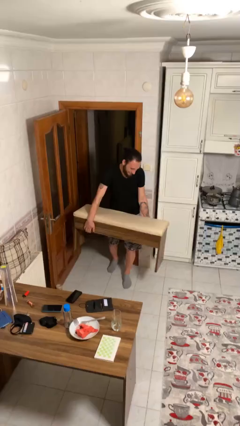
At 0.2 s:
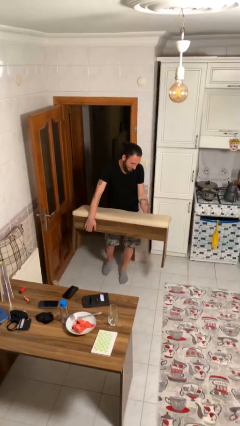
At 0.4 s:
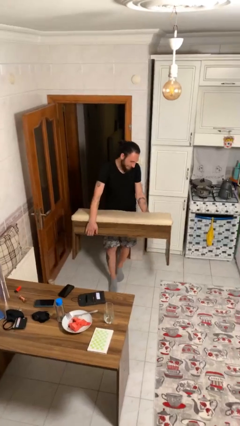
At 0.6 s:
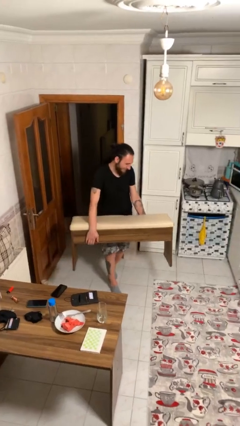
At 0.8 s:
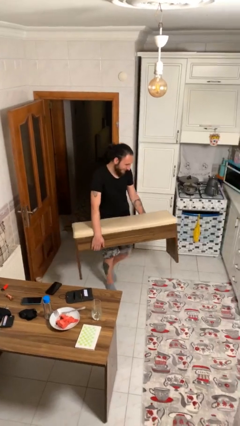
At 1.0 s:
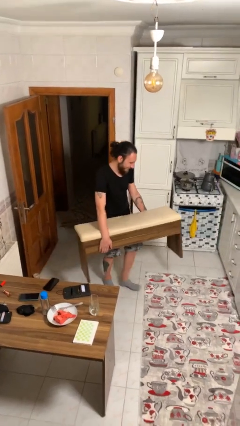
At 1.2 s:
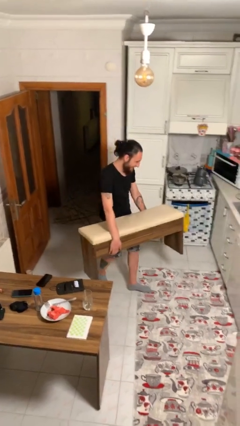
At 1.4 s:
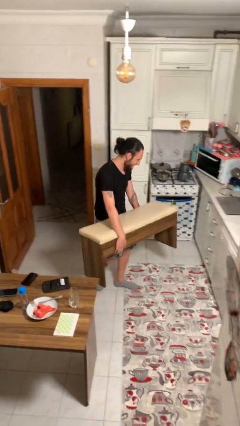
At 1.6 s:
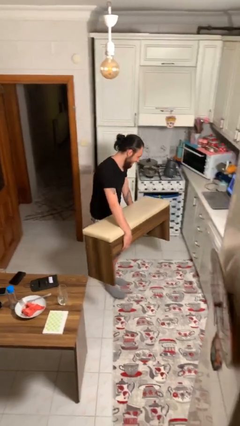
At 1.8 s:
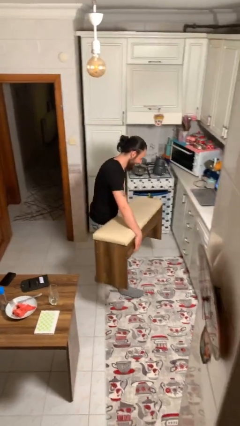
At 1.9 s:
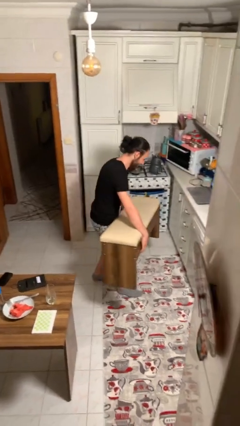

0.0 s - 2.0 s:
person carries heavy object

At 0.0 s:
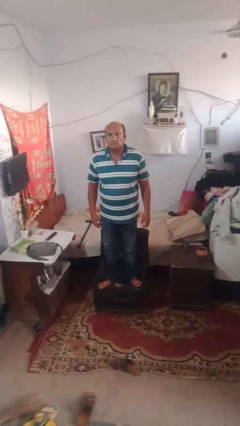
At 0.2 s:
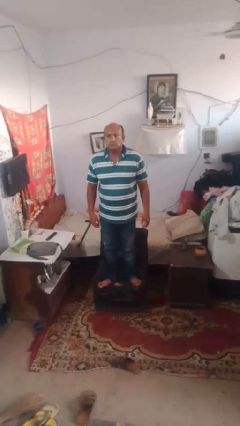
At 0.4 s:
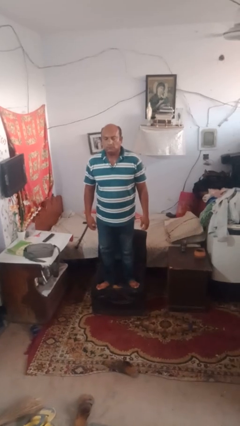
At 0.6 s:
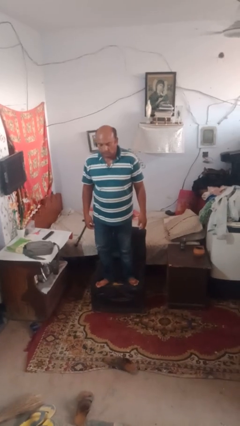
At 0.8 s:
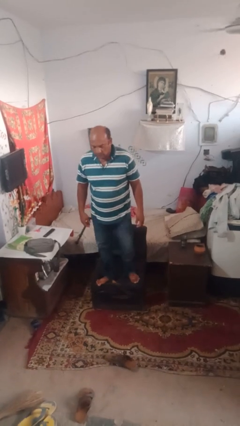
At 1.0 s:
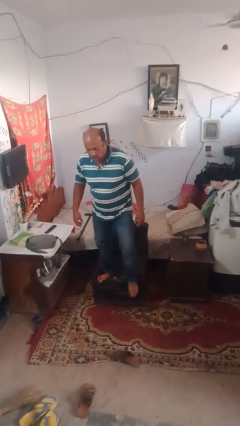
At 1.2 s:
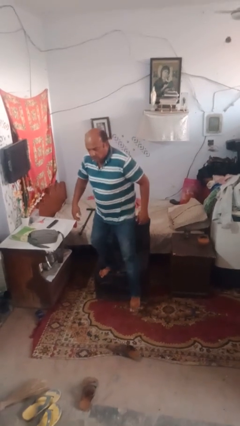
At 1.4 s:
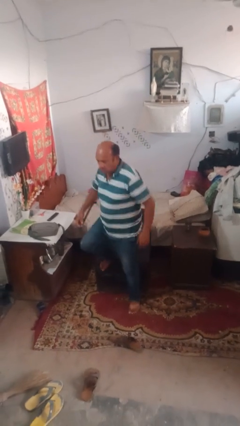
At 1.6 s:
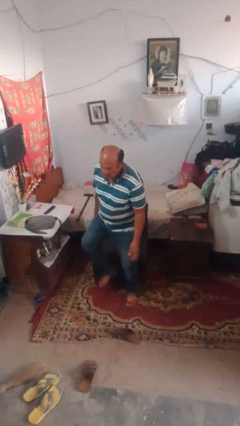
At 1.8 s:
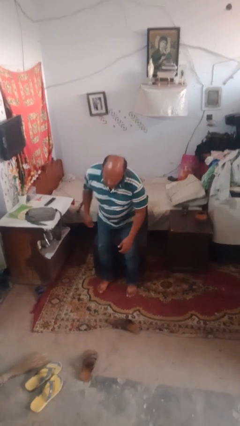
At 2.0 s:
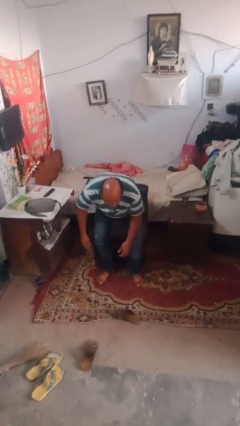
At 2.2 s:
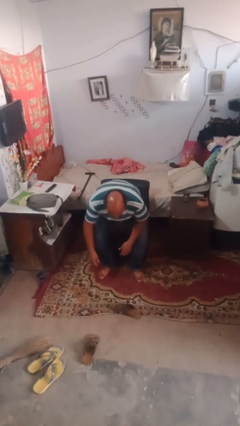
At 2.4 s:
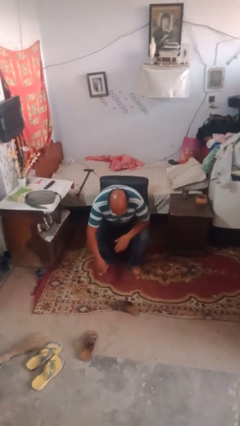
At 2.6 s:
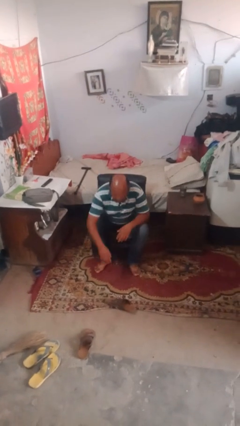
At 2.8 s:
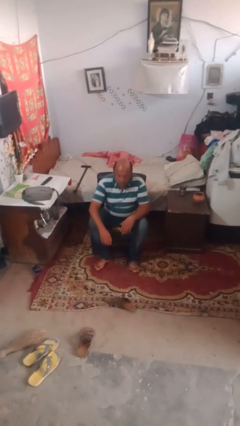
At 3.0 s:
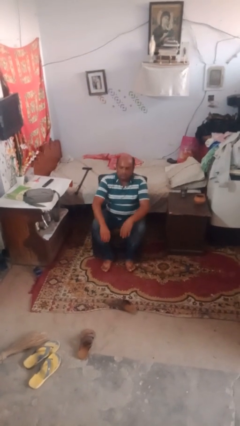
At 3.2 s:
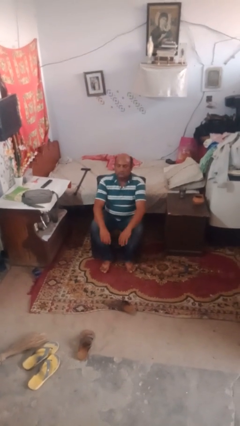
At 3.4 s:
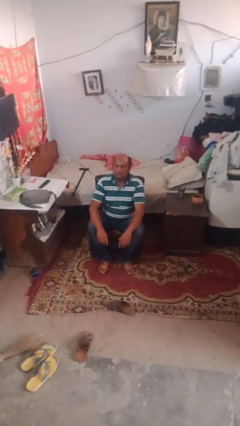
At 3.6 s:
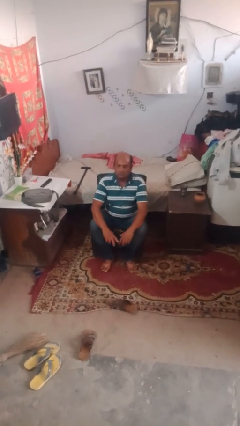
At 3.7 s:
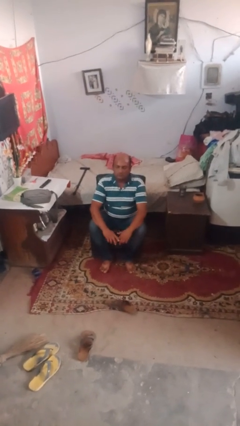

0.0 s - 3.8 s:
person lies down on couch

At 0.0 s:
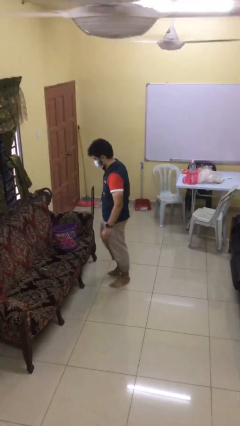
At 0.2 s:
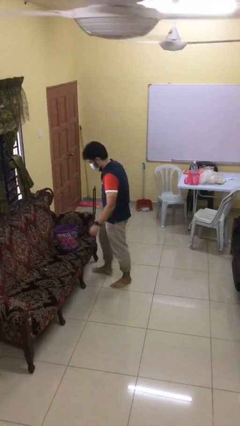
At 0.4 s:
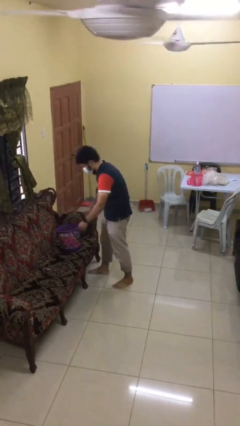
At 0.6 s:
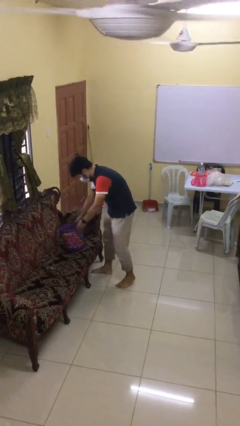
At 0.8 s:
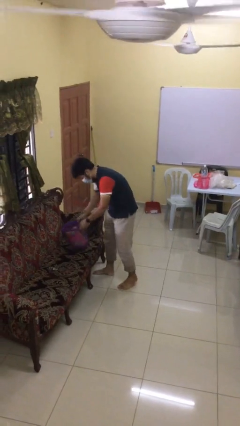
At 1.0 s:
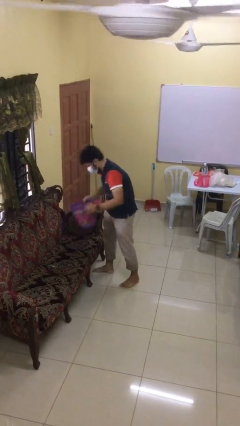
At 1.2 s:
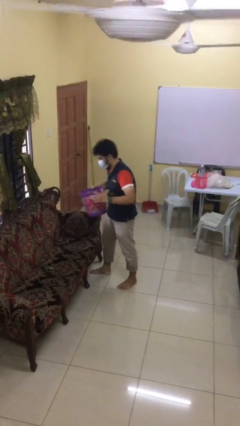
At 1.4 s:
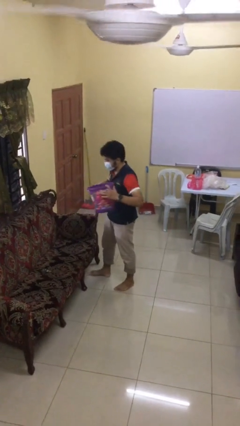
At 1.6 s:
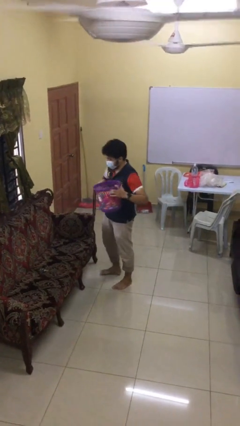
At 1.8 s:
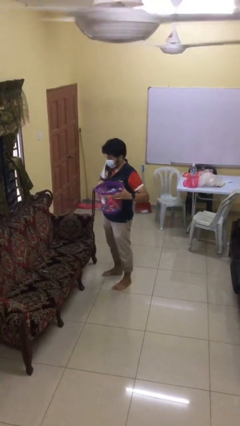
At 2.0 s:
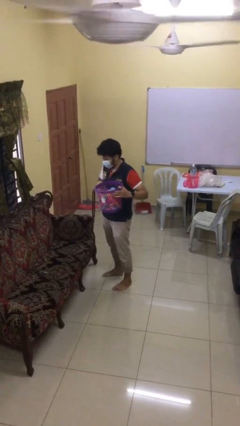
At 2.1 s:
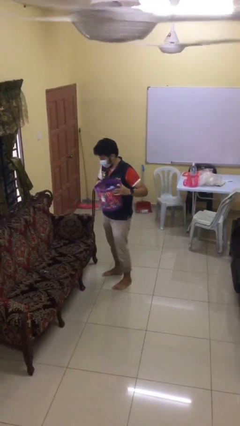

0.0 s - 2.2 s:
person picks up object from couch

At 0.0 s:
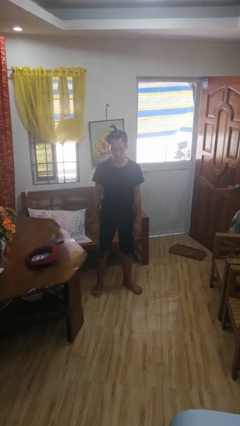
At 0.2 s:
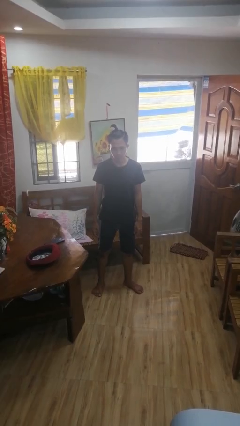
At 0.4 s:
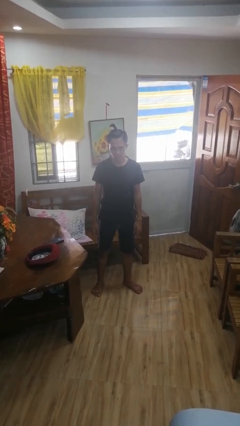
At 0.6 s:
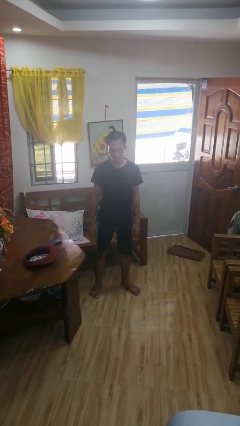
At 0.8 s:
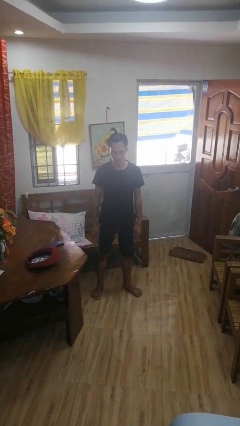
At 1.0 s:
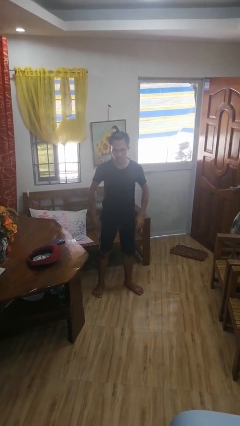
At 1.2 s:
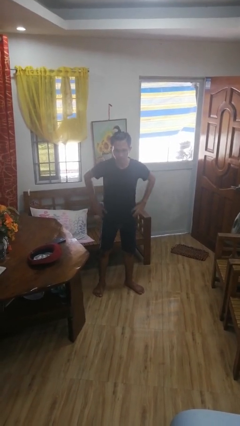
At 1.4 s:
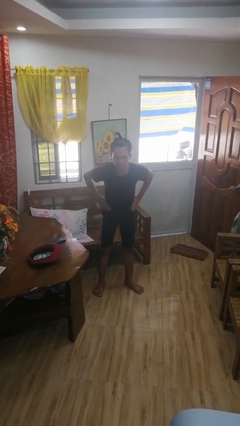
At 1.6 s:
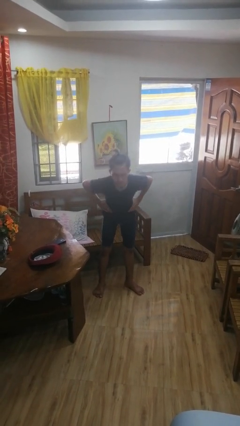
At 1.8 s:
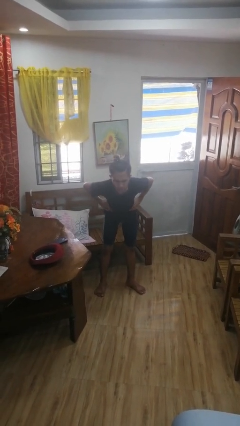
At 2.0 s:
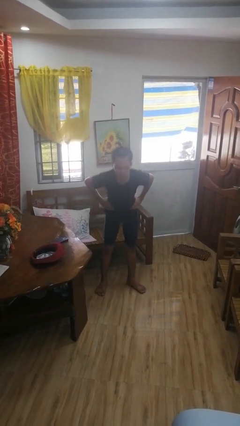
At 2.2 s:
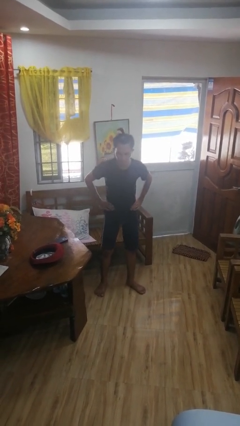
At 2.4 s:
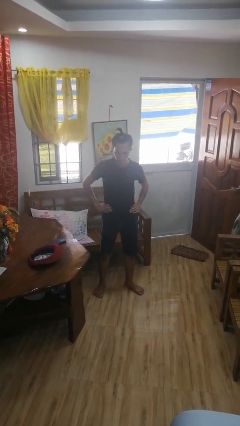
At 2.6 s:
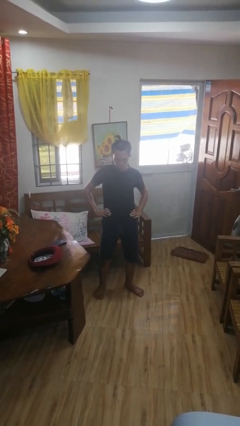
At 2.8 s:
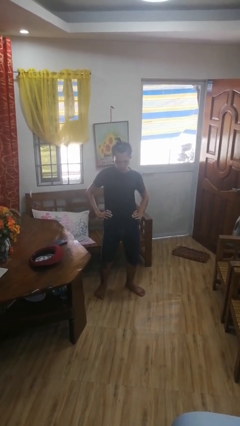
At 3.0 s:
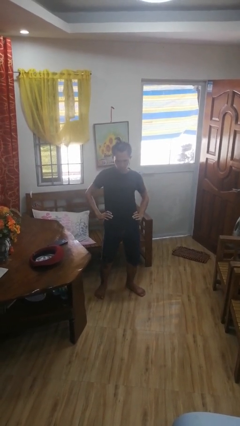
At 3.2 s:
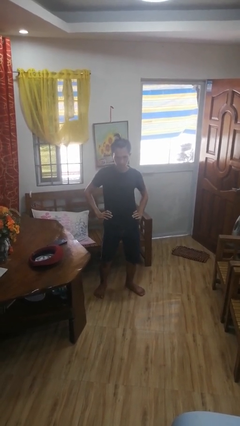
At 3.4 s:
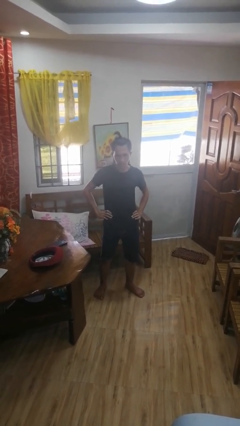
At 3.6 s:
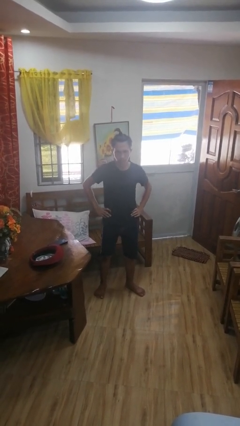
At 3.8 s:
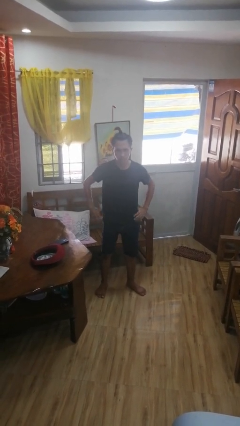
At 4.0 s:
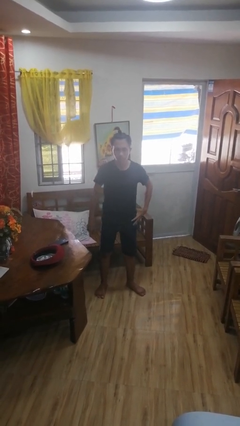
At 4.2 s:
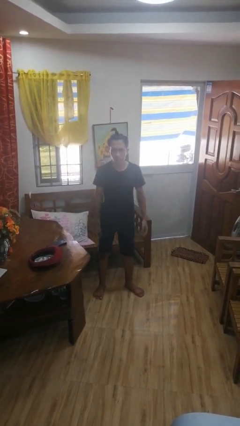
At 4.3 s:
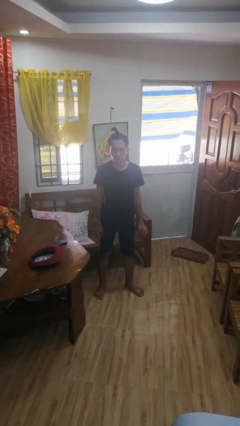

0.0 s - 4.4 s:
person wiggles hips

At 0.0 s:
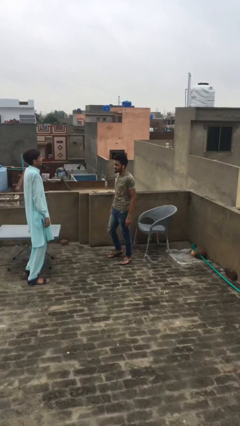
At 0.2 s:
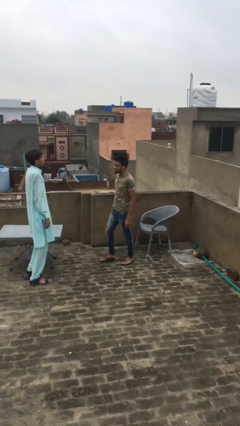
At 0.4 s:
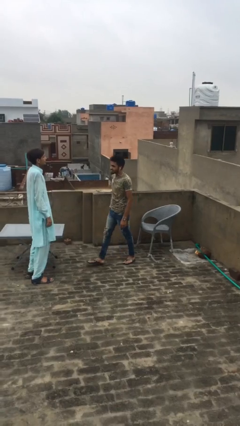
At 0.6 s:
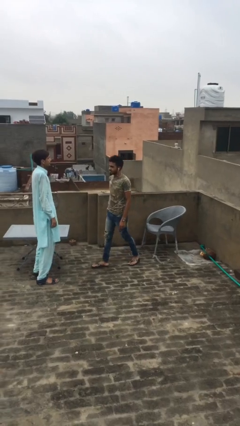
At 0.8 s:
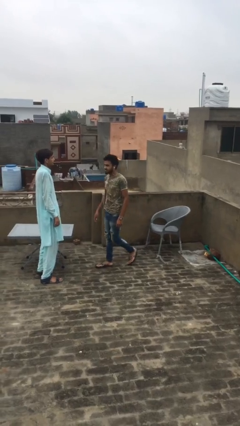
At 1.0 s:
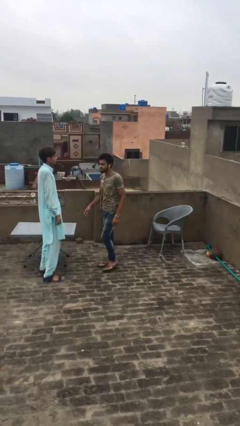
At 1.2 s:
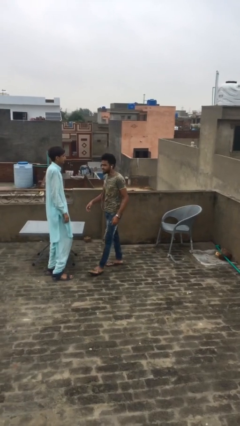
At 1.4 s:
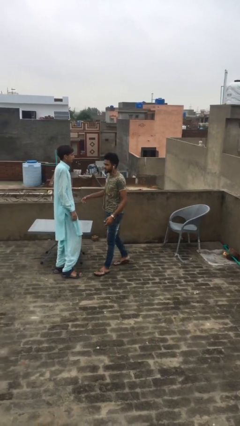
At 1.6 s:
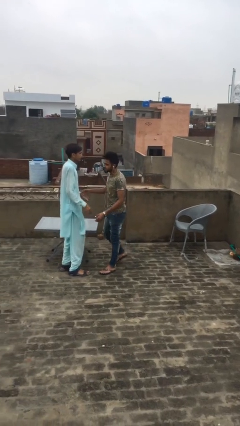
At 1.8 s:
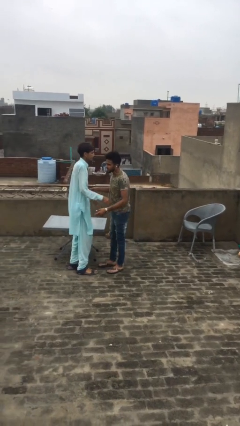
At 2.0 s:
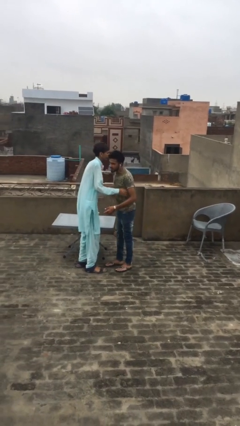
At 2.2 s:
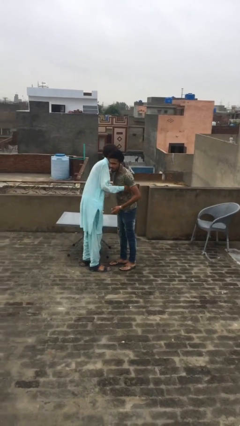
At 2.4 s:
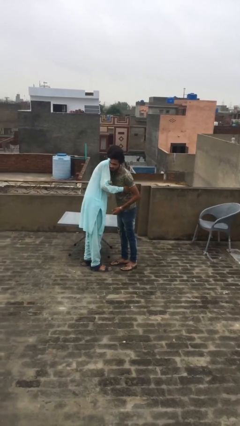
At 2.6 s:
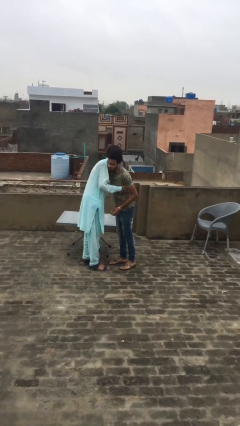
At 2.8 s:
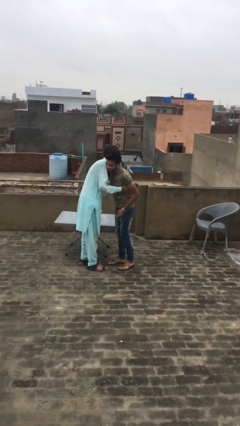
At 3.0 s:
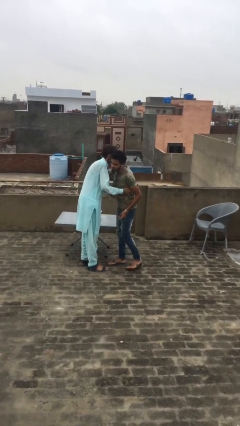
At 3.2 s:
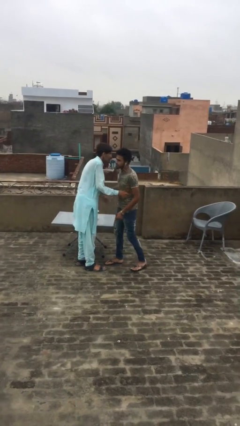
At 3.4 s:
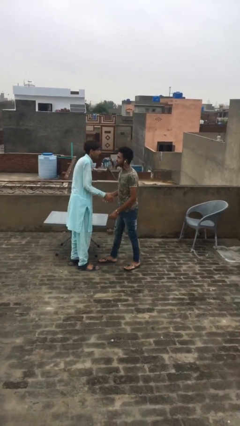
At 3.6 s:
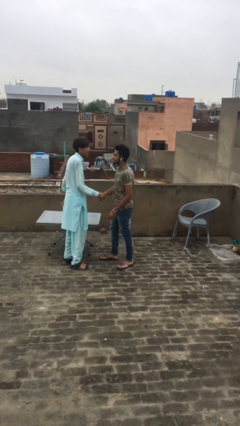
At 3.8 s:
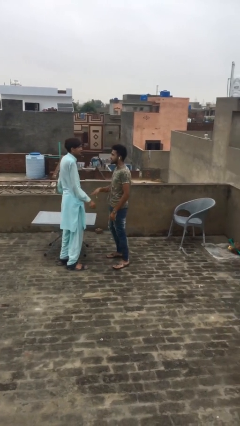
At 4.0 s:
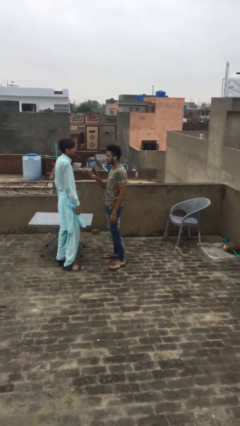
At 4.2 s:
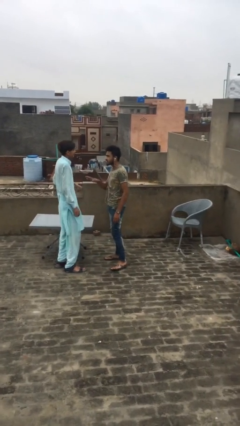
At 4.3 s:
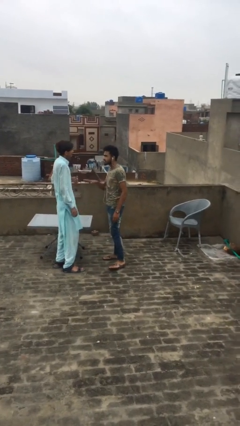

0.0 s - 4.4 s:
person embraces person

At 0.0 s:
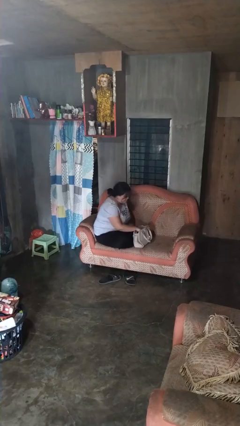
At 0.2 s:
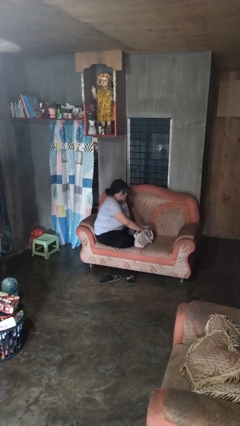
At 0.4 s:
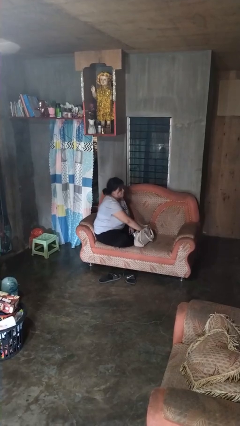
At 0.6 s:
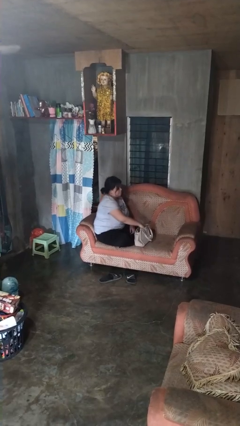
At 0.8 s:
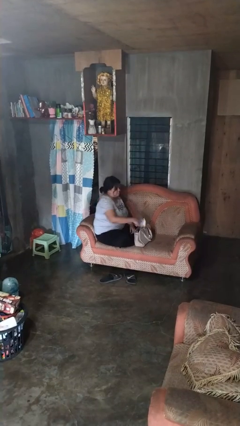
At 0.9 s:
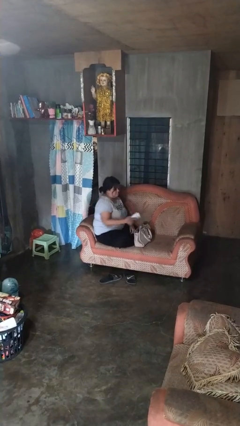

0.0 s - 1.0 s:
person takes object from purse
